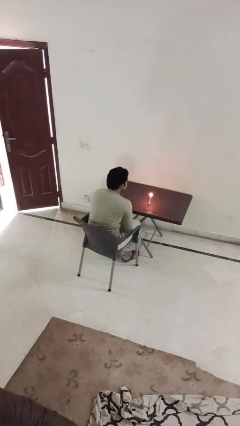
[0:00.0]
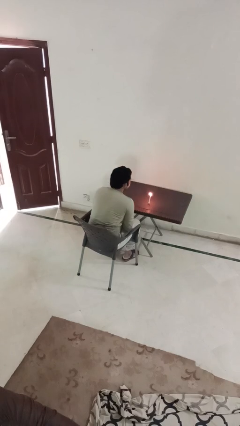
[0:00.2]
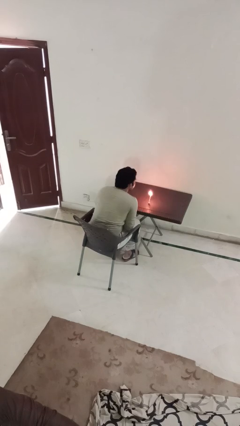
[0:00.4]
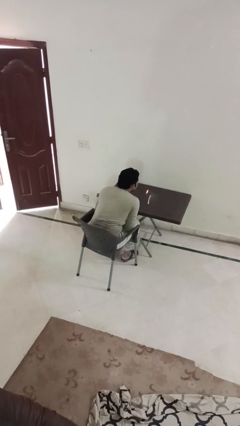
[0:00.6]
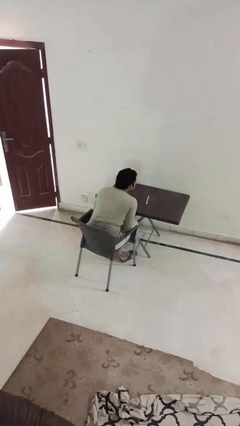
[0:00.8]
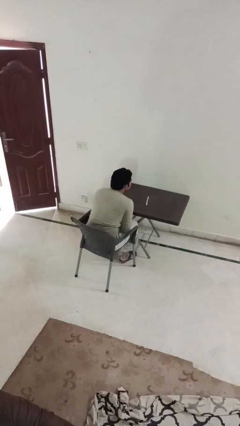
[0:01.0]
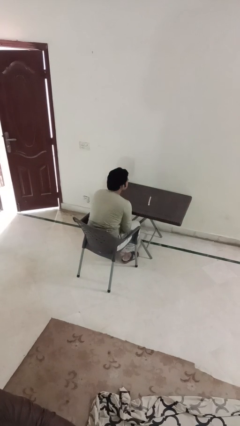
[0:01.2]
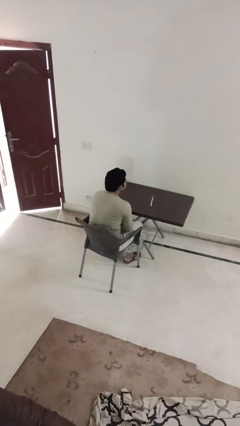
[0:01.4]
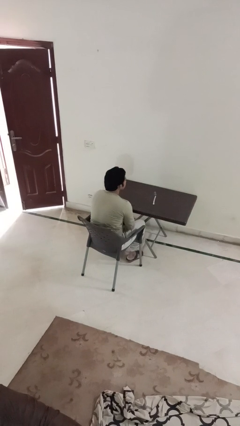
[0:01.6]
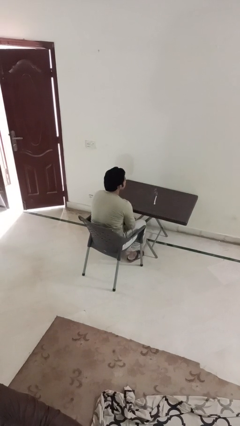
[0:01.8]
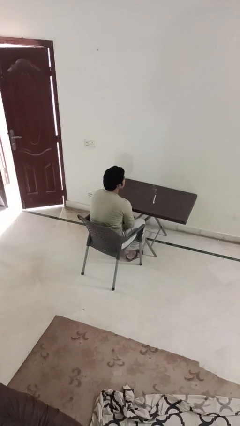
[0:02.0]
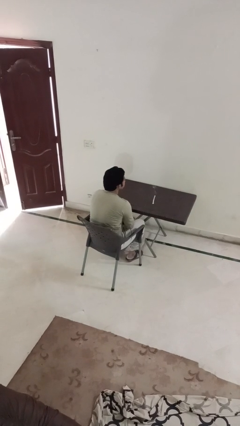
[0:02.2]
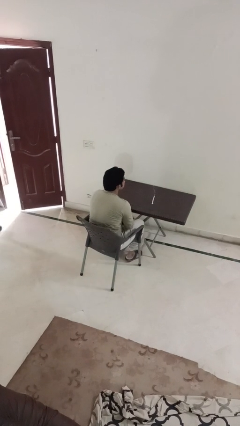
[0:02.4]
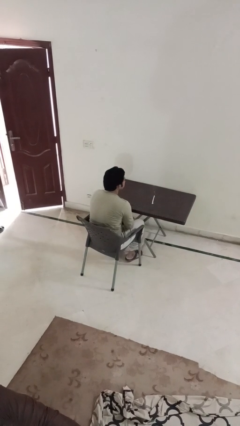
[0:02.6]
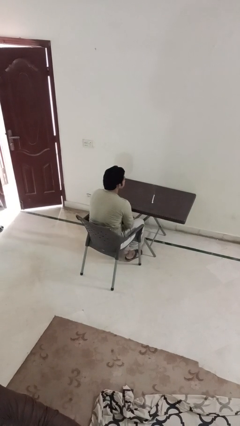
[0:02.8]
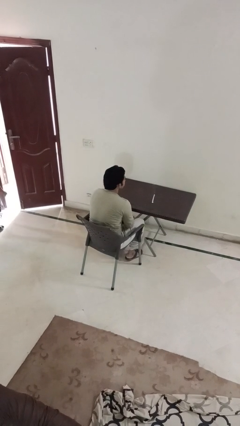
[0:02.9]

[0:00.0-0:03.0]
person extinguishes candle

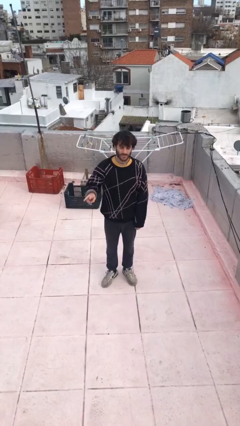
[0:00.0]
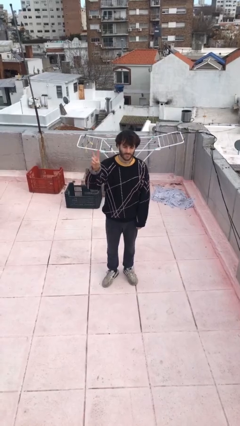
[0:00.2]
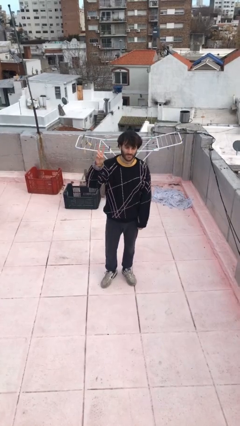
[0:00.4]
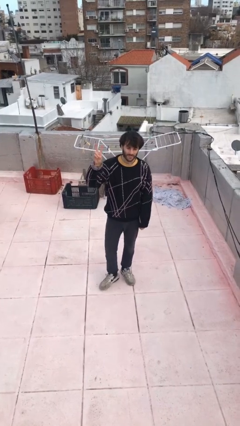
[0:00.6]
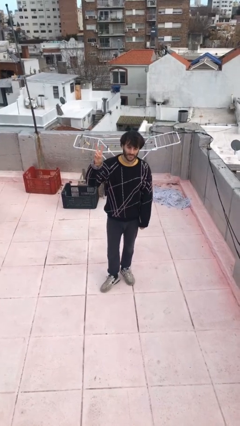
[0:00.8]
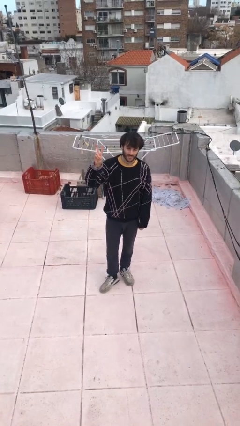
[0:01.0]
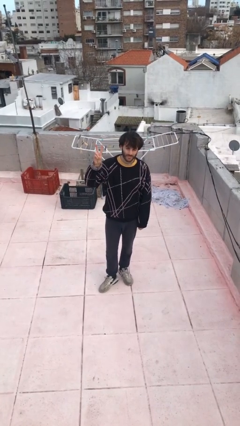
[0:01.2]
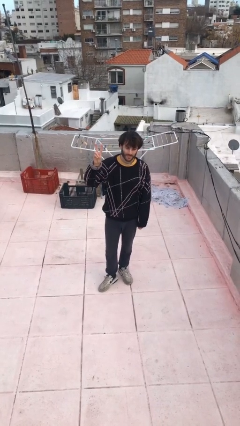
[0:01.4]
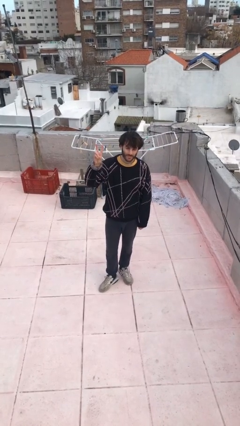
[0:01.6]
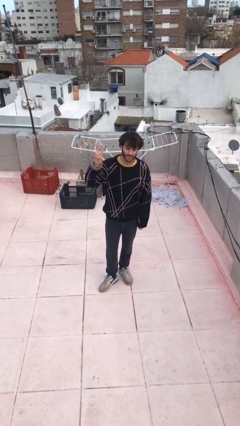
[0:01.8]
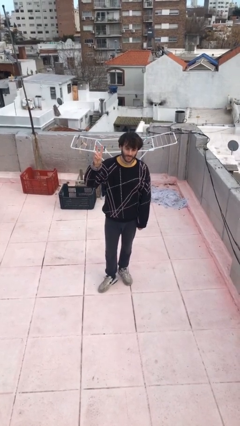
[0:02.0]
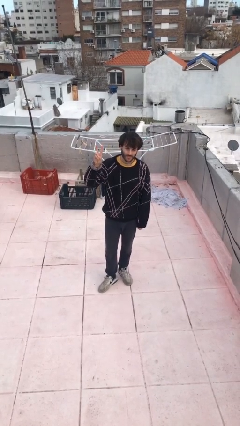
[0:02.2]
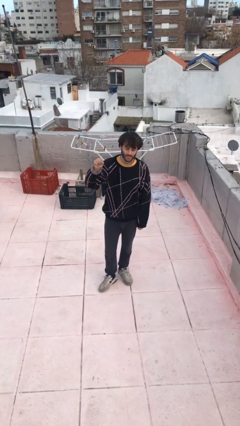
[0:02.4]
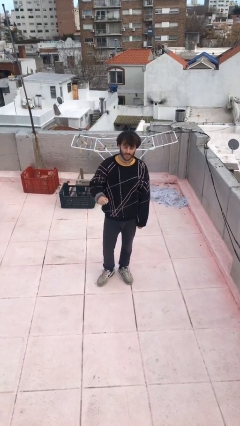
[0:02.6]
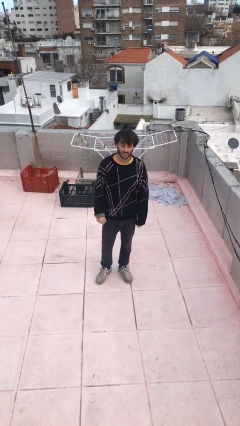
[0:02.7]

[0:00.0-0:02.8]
person gestures peace

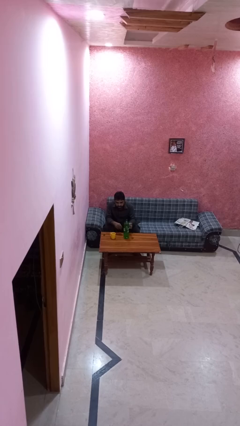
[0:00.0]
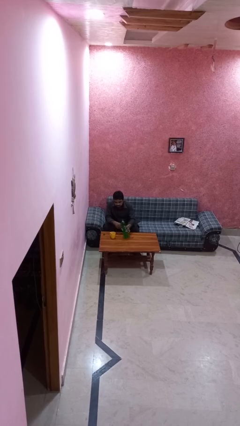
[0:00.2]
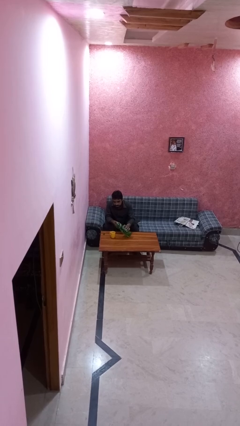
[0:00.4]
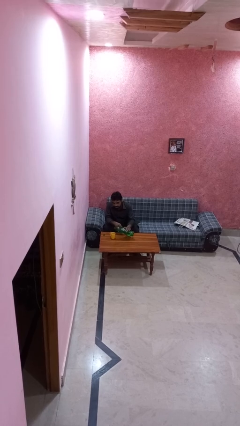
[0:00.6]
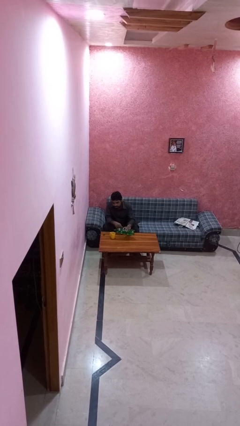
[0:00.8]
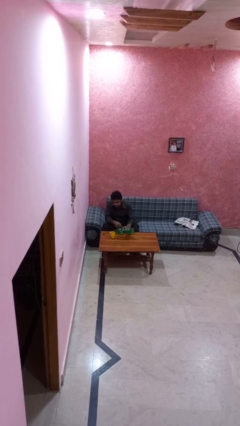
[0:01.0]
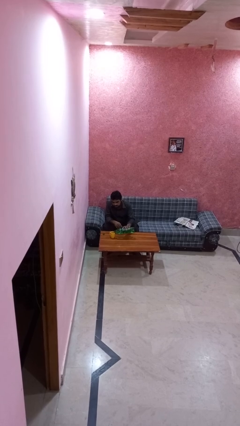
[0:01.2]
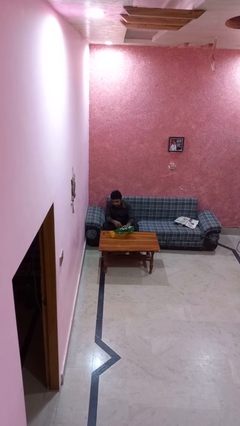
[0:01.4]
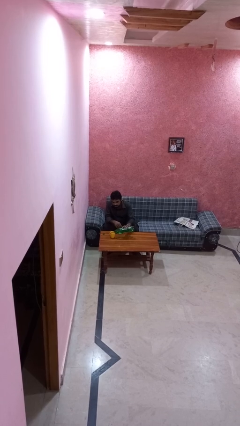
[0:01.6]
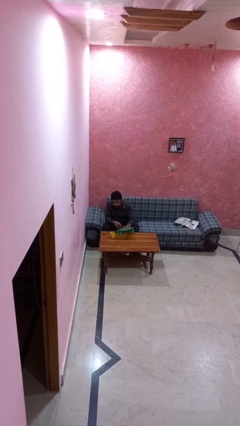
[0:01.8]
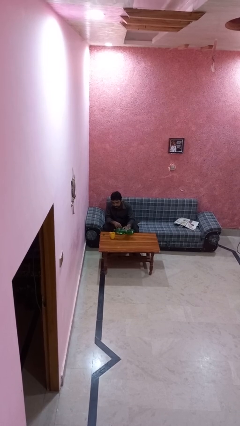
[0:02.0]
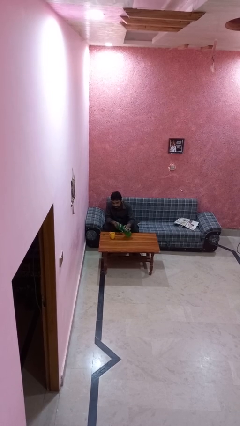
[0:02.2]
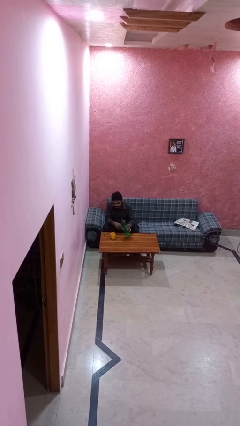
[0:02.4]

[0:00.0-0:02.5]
person pours liquid into cup

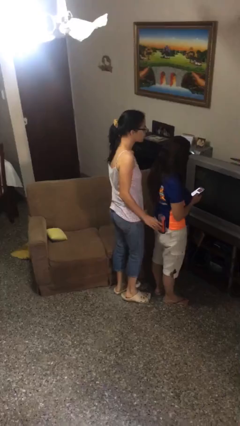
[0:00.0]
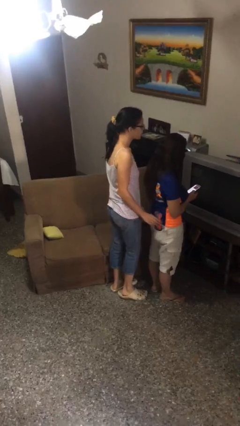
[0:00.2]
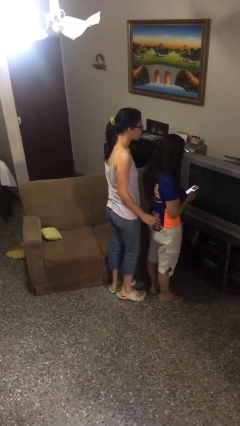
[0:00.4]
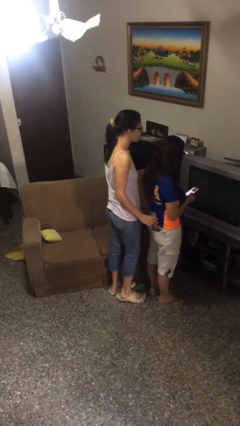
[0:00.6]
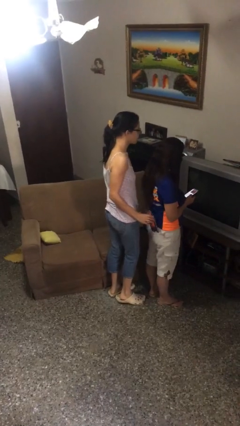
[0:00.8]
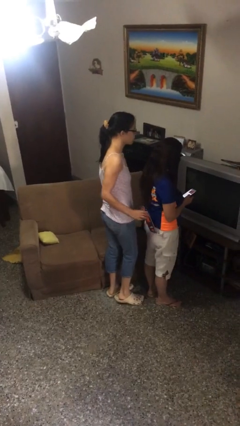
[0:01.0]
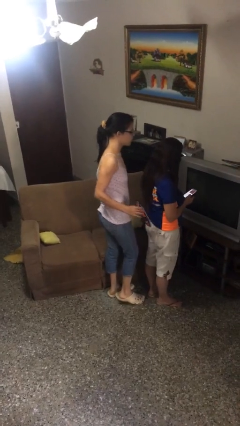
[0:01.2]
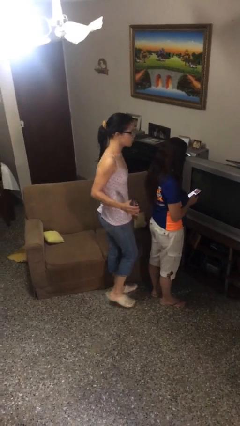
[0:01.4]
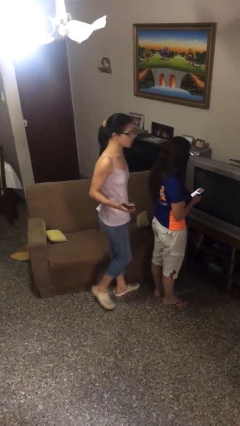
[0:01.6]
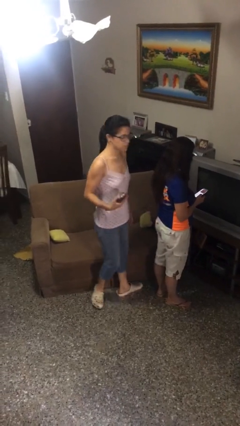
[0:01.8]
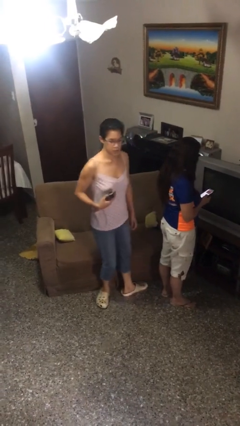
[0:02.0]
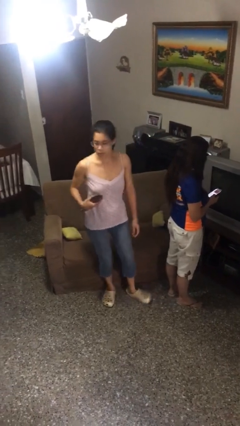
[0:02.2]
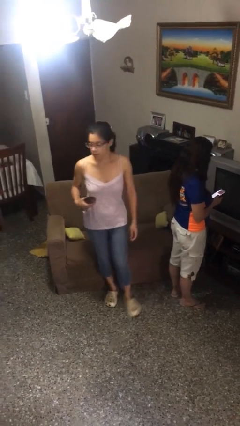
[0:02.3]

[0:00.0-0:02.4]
person steals object from person

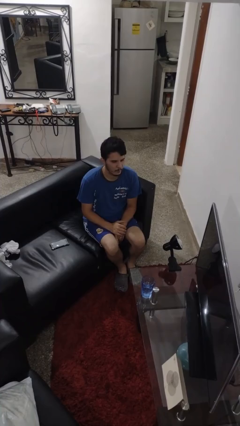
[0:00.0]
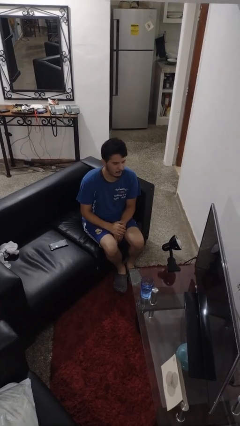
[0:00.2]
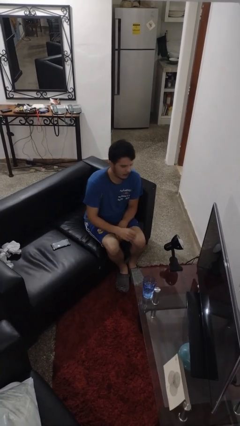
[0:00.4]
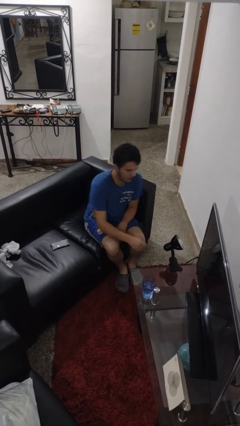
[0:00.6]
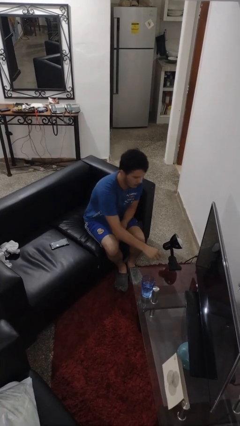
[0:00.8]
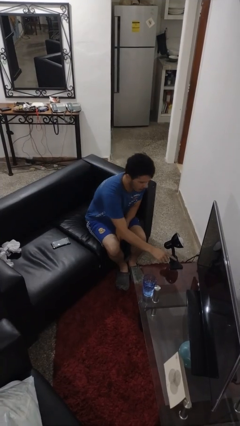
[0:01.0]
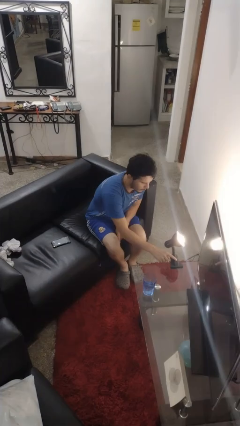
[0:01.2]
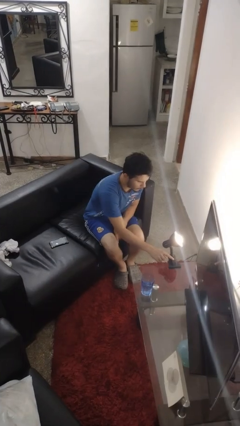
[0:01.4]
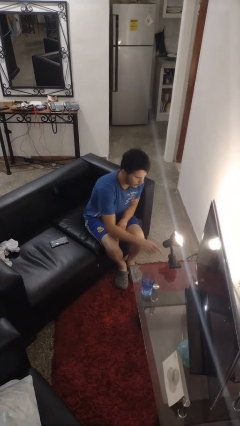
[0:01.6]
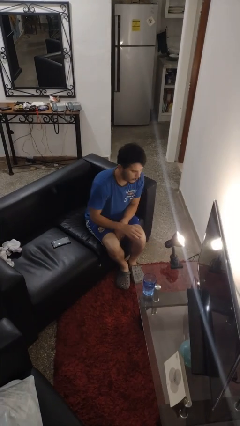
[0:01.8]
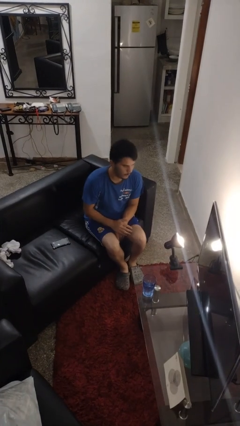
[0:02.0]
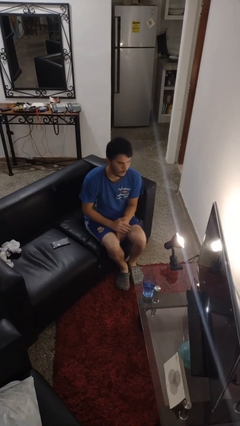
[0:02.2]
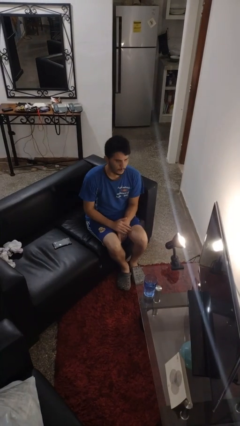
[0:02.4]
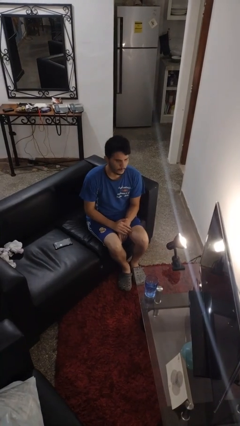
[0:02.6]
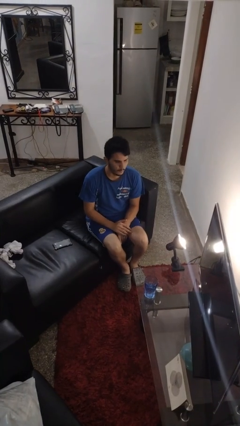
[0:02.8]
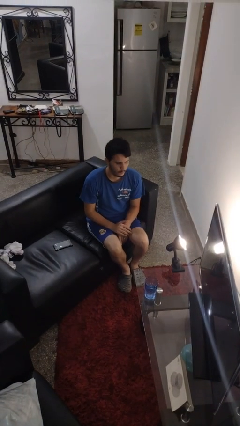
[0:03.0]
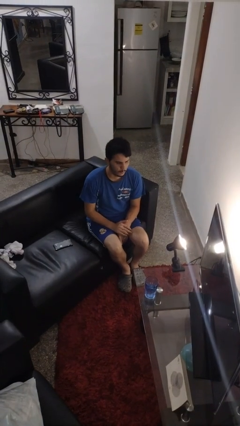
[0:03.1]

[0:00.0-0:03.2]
person turns on lamp

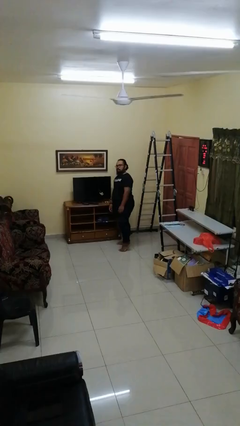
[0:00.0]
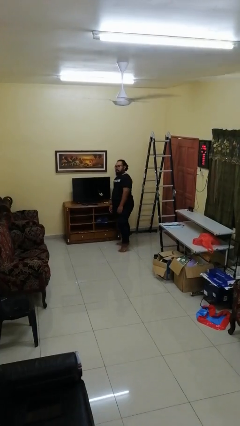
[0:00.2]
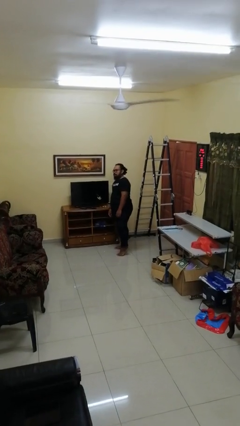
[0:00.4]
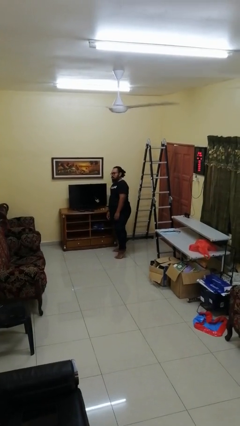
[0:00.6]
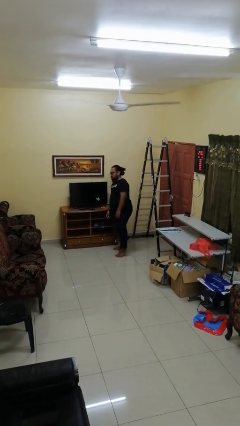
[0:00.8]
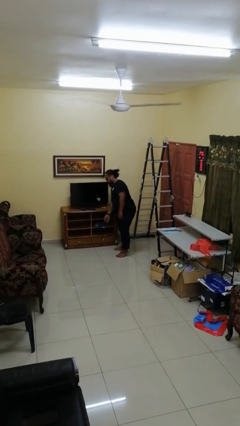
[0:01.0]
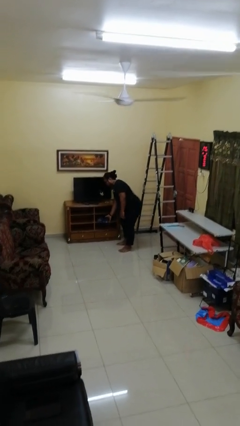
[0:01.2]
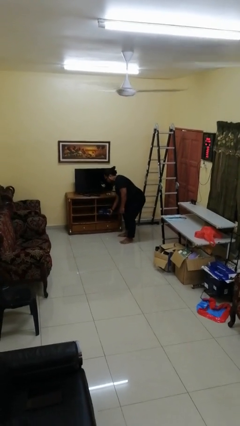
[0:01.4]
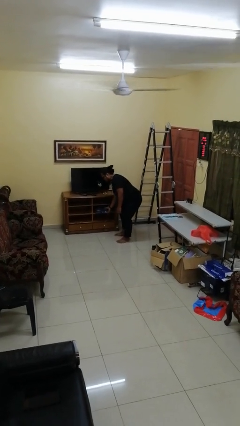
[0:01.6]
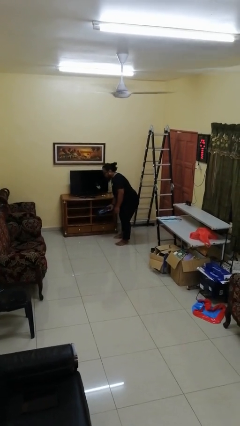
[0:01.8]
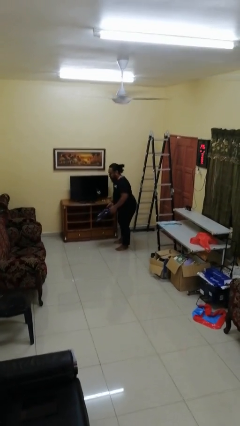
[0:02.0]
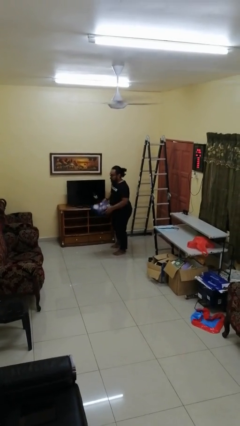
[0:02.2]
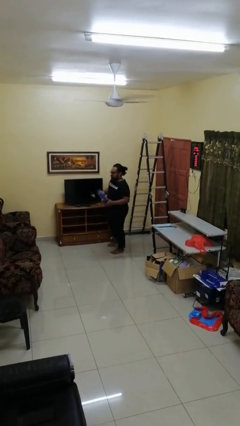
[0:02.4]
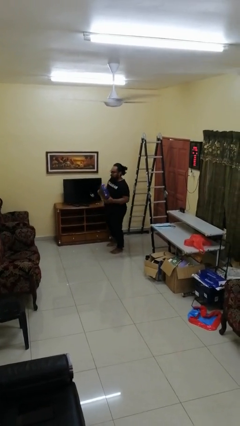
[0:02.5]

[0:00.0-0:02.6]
person picks up object from cabinet

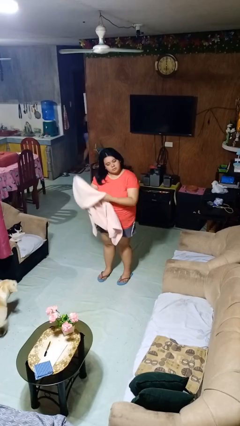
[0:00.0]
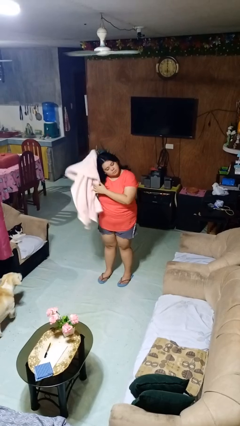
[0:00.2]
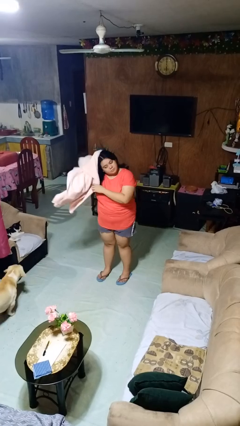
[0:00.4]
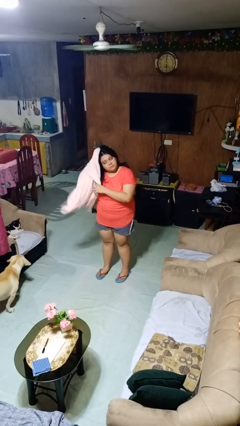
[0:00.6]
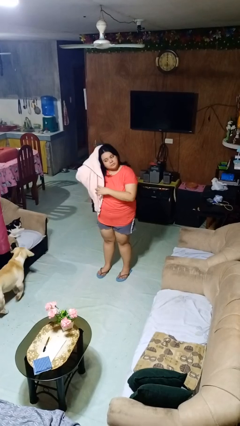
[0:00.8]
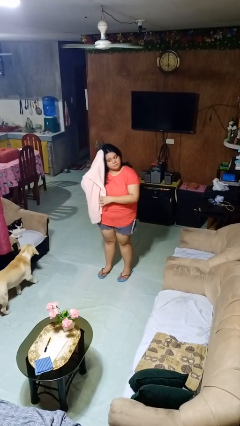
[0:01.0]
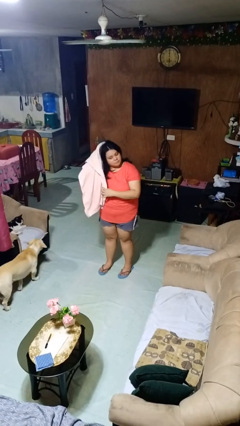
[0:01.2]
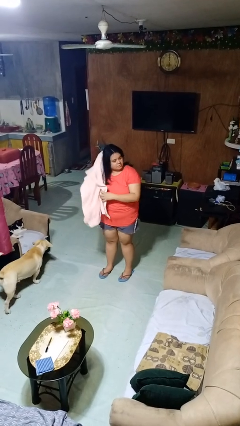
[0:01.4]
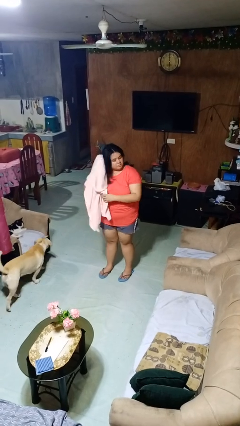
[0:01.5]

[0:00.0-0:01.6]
person dries hair with towel
